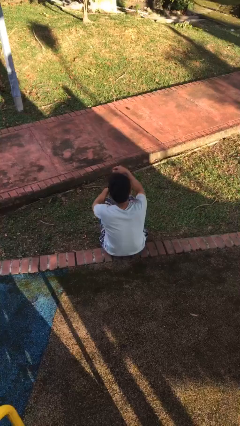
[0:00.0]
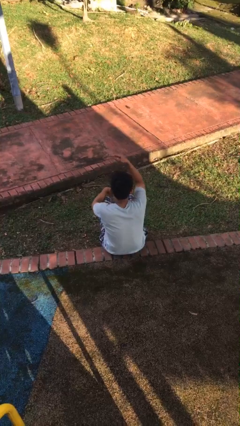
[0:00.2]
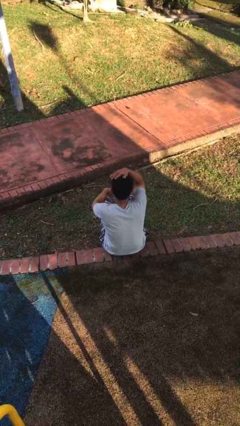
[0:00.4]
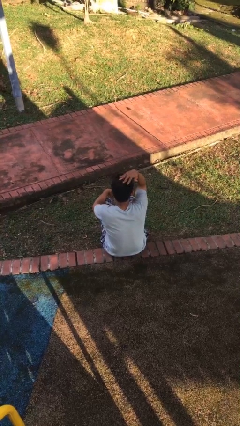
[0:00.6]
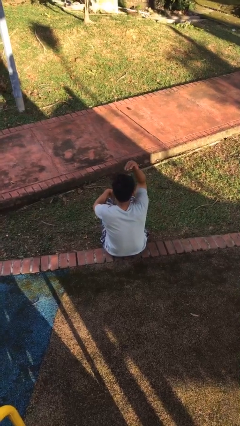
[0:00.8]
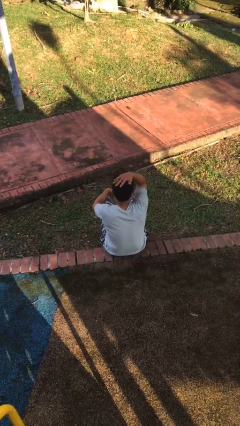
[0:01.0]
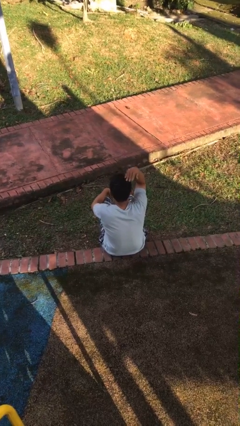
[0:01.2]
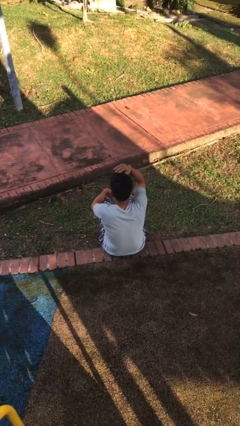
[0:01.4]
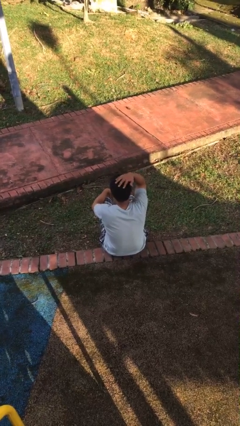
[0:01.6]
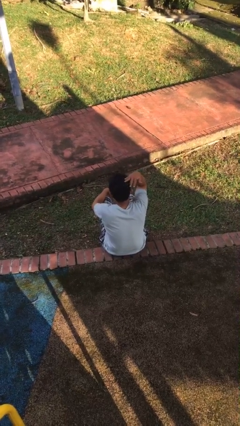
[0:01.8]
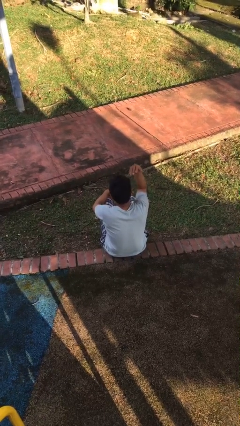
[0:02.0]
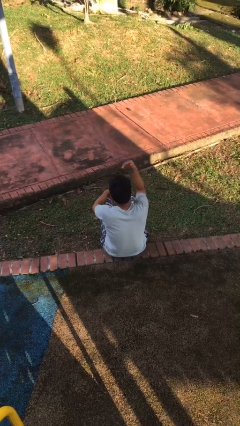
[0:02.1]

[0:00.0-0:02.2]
person pats head

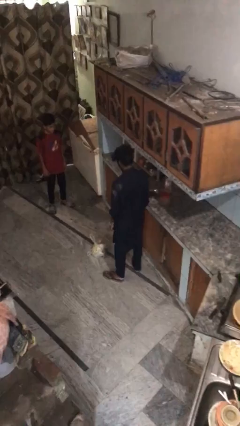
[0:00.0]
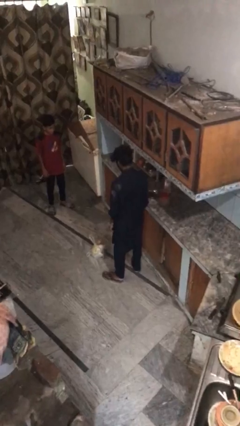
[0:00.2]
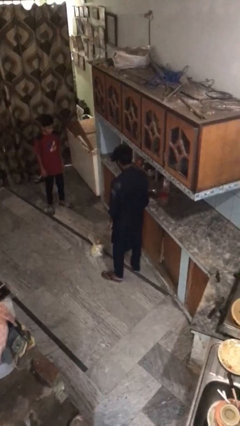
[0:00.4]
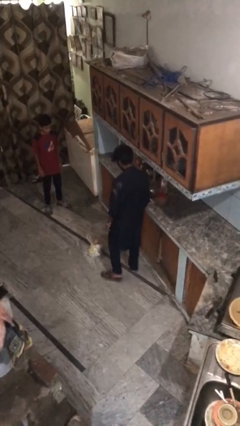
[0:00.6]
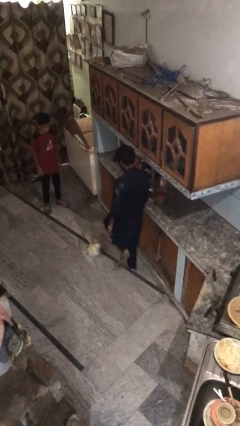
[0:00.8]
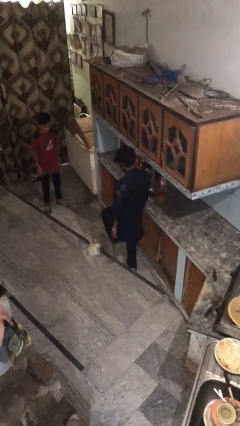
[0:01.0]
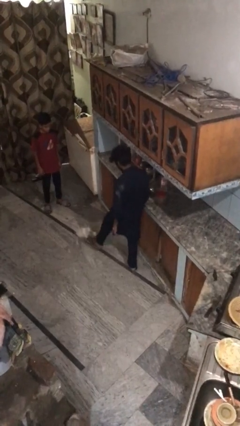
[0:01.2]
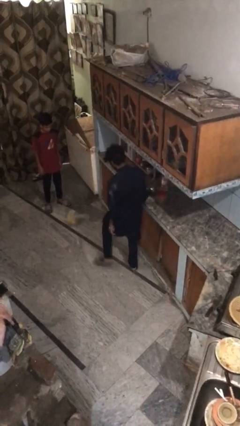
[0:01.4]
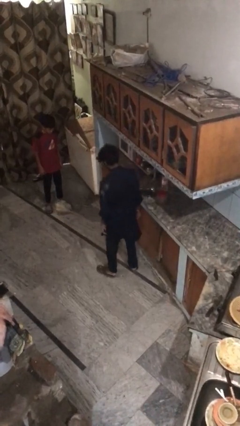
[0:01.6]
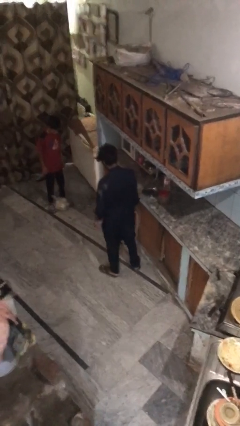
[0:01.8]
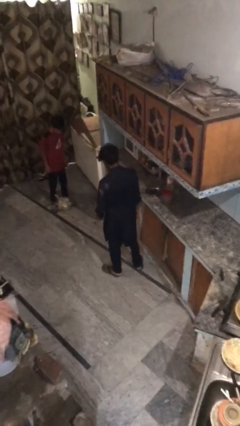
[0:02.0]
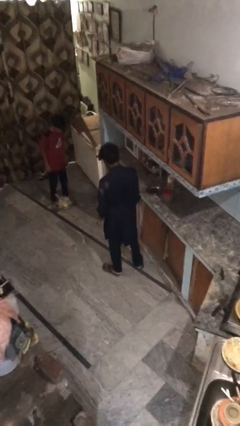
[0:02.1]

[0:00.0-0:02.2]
person kicks object to person

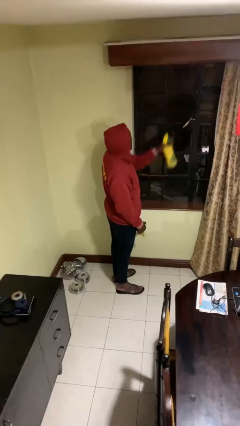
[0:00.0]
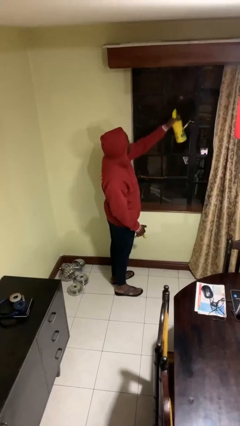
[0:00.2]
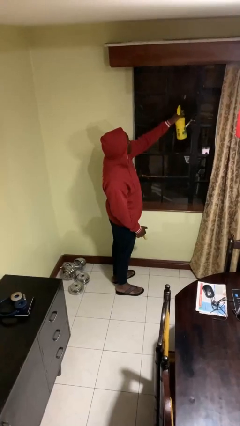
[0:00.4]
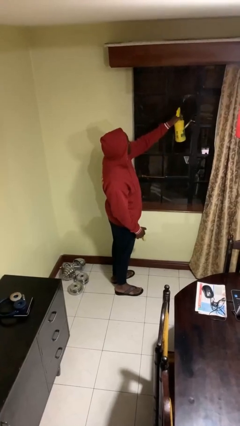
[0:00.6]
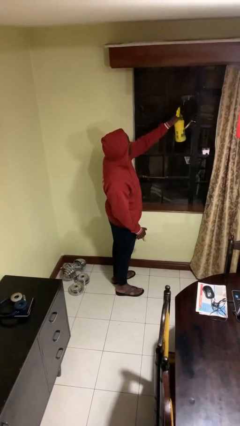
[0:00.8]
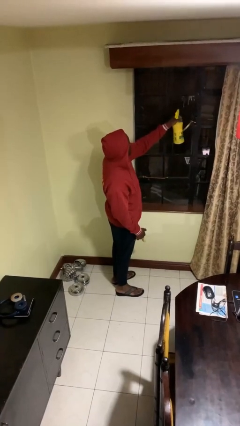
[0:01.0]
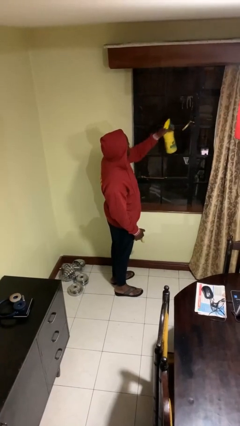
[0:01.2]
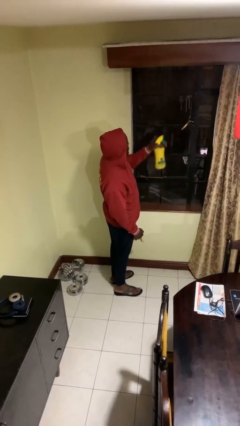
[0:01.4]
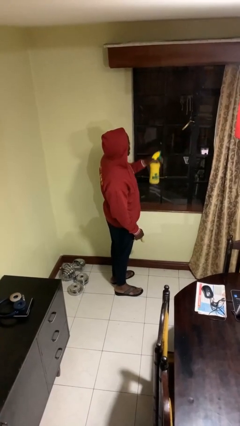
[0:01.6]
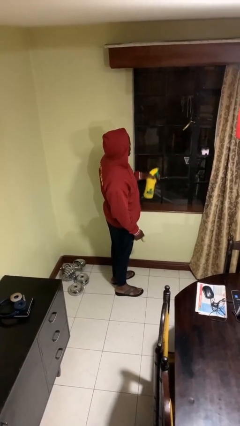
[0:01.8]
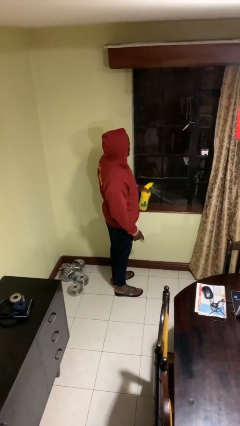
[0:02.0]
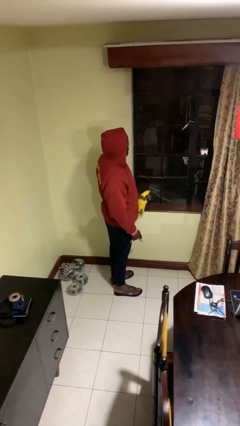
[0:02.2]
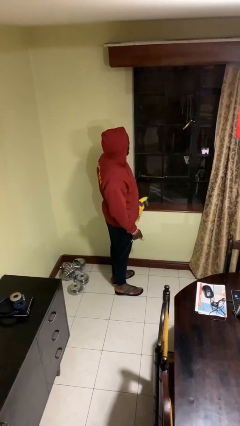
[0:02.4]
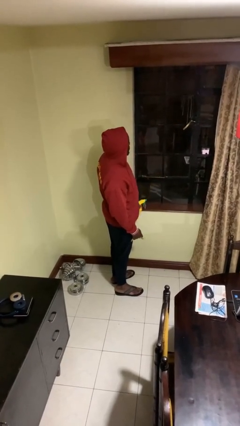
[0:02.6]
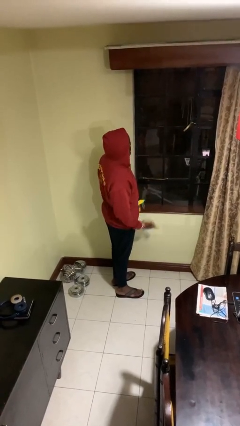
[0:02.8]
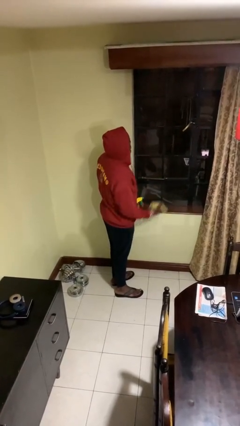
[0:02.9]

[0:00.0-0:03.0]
person sprays from bottle

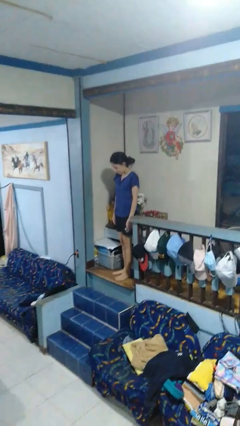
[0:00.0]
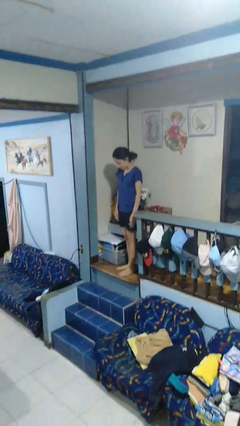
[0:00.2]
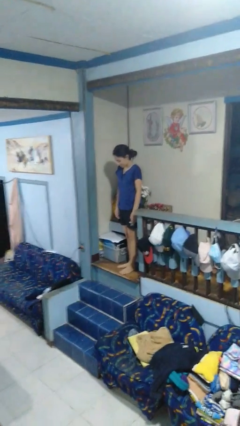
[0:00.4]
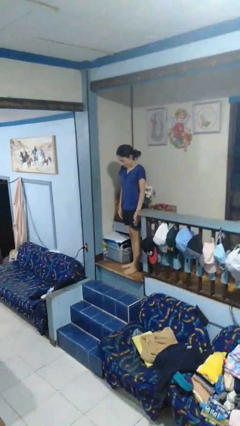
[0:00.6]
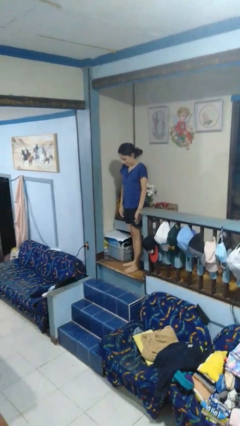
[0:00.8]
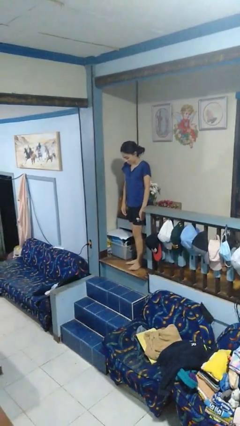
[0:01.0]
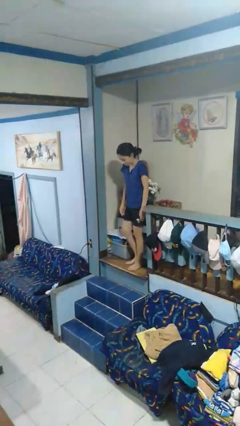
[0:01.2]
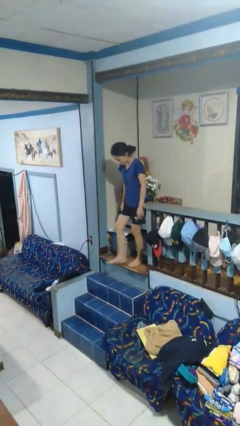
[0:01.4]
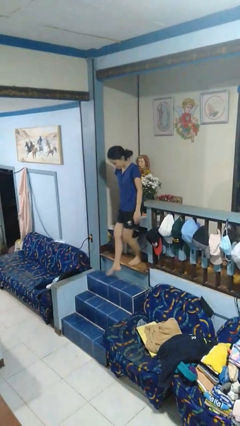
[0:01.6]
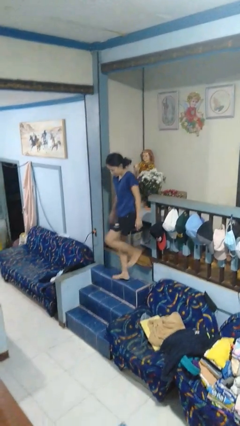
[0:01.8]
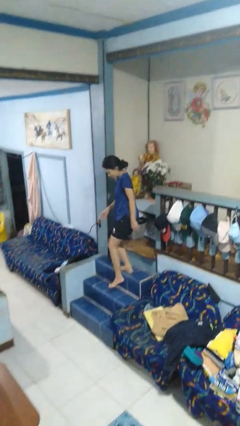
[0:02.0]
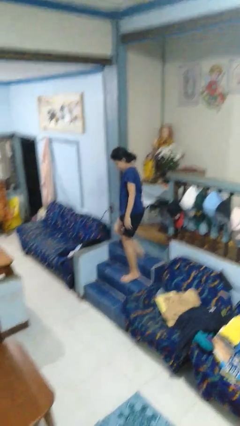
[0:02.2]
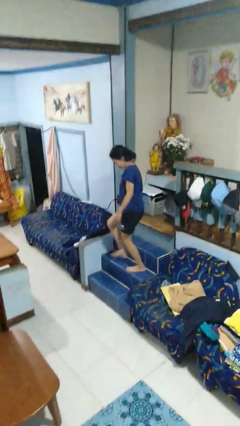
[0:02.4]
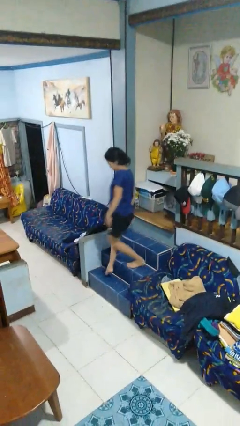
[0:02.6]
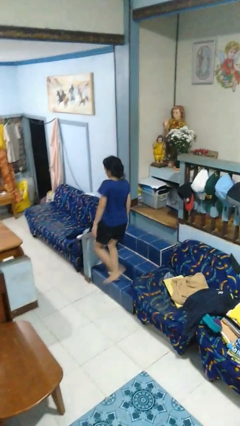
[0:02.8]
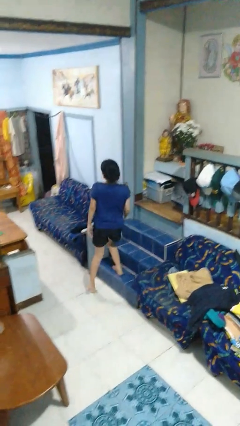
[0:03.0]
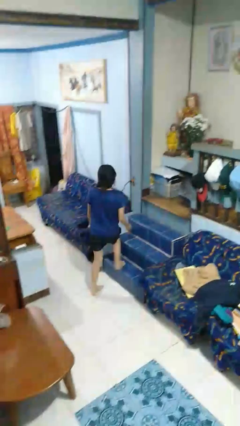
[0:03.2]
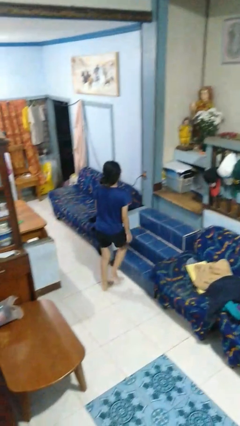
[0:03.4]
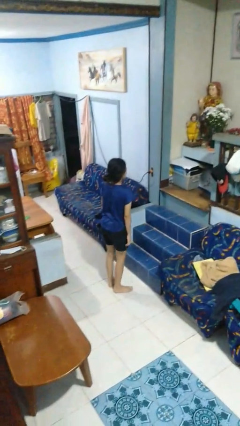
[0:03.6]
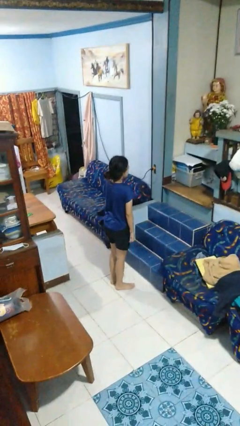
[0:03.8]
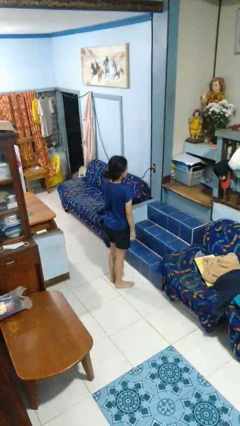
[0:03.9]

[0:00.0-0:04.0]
person climbs down stairs

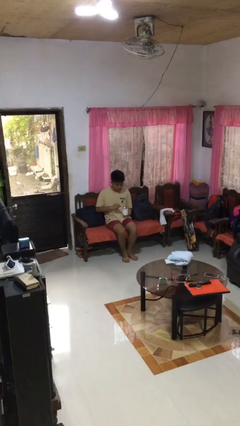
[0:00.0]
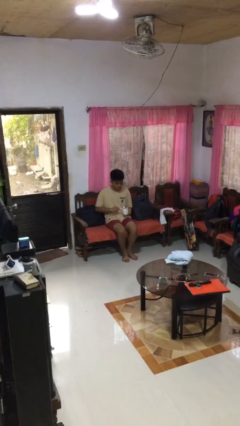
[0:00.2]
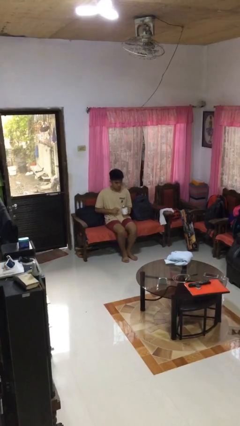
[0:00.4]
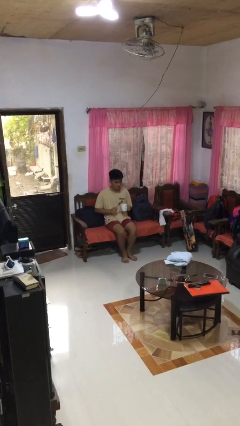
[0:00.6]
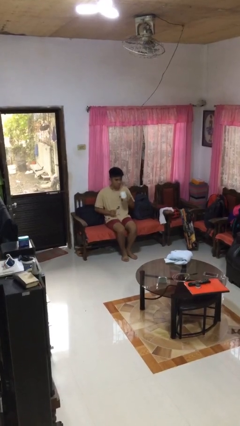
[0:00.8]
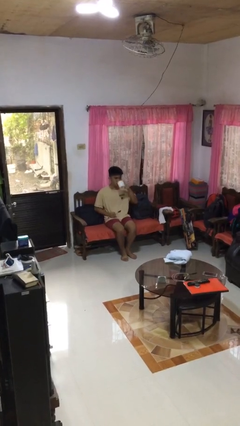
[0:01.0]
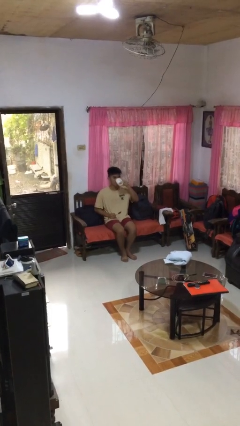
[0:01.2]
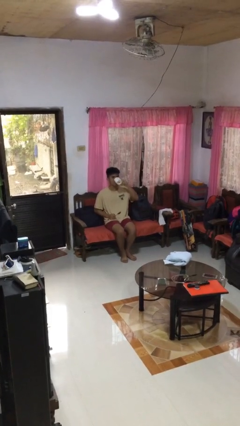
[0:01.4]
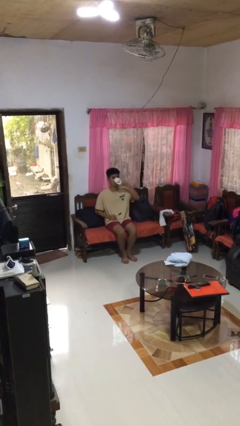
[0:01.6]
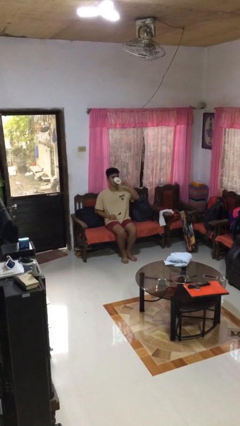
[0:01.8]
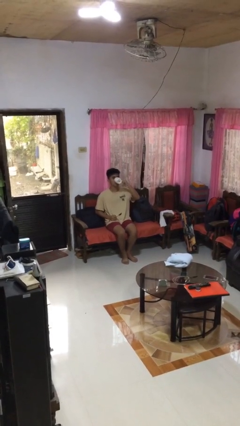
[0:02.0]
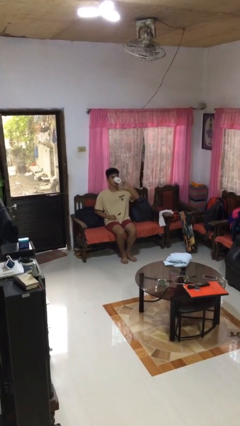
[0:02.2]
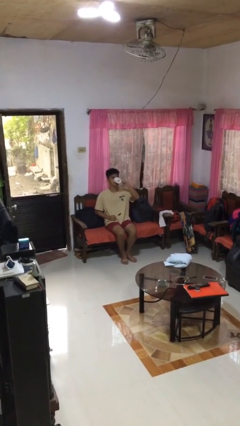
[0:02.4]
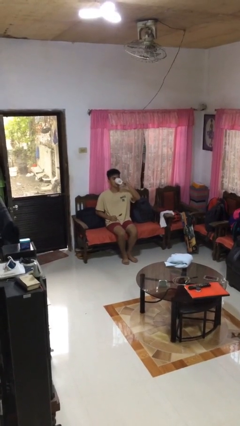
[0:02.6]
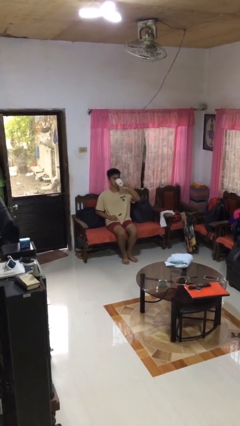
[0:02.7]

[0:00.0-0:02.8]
person drinks from mug

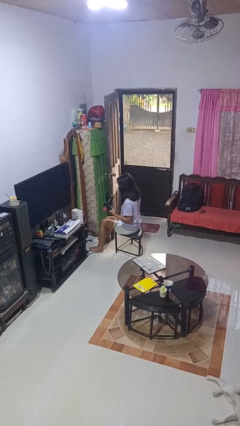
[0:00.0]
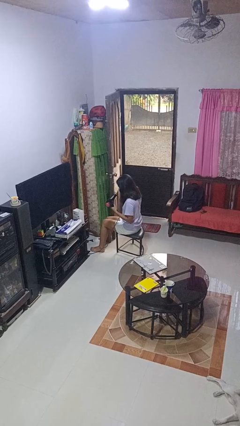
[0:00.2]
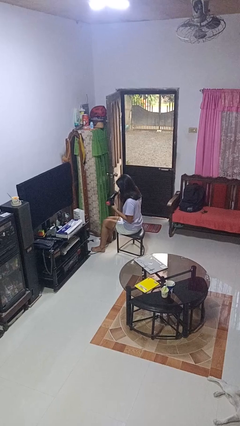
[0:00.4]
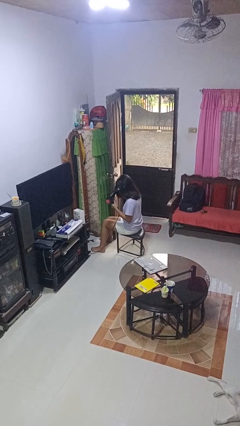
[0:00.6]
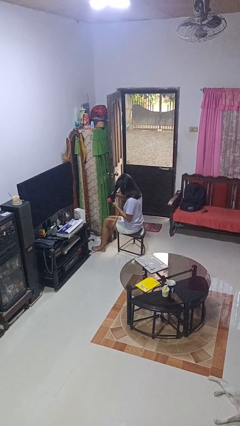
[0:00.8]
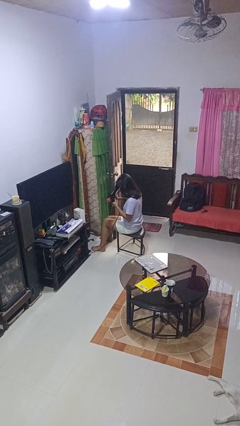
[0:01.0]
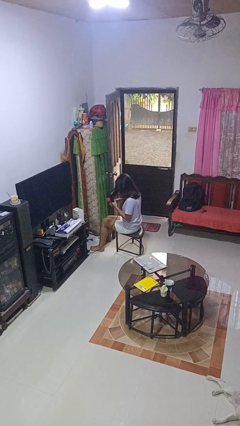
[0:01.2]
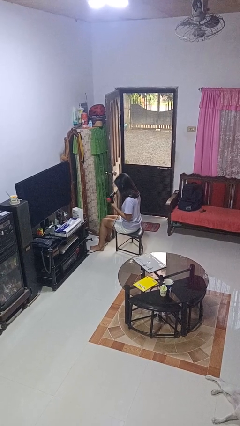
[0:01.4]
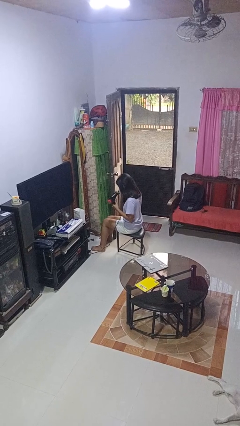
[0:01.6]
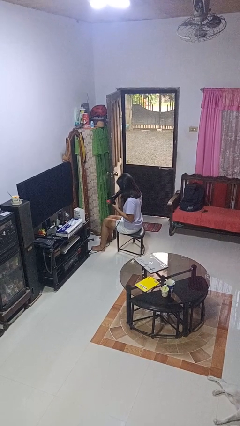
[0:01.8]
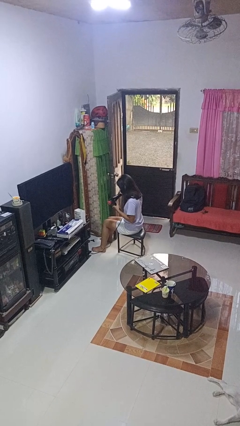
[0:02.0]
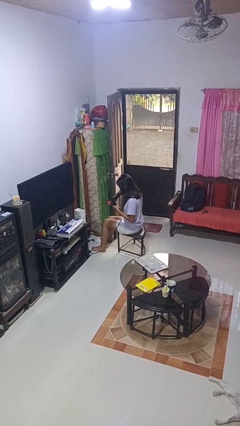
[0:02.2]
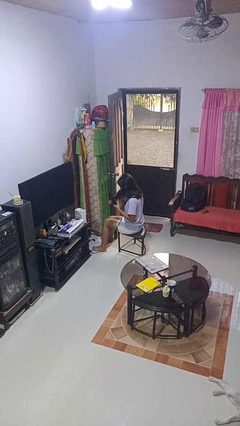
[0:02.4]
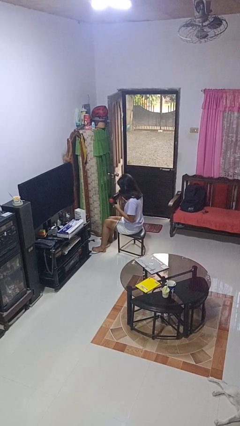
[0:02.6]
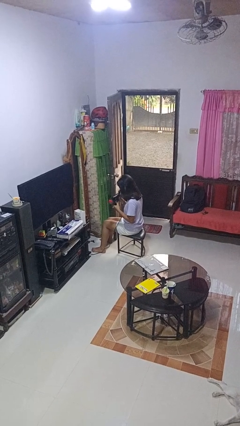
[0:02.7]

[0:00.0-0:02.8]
person dries hair with hairdryer

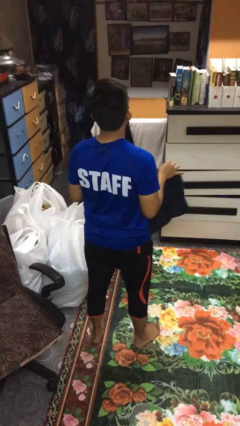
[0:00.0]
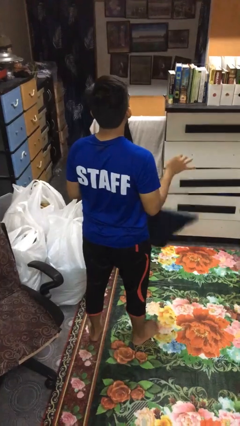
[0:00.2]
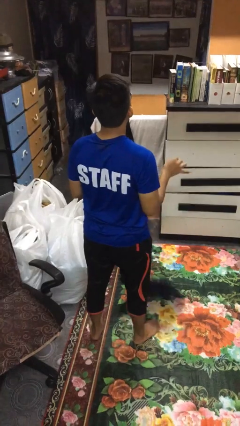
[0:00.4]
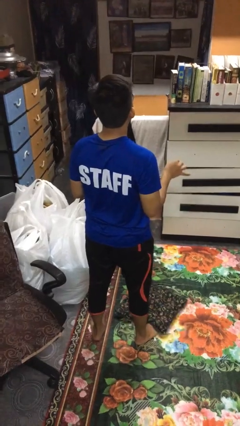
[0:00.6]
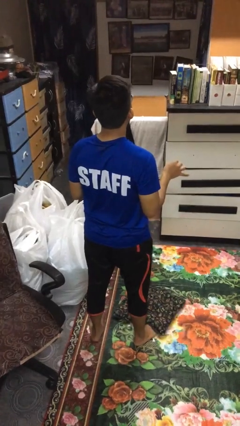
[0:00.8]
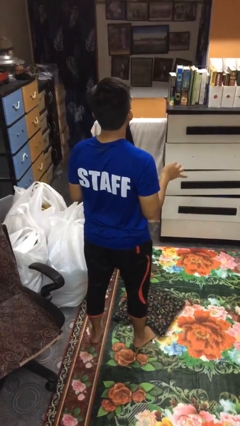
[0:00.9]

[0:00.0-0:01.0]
person drops object
